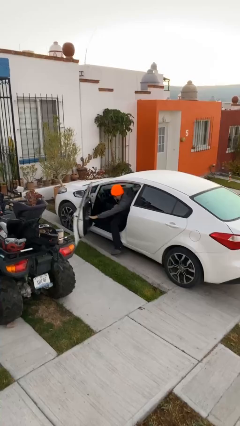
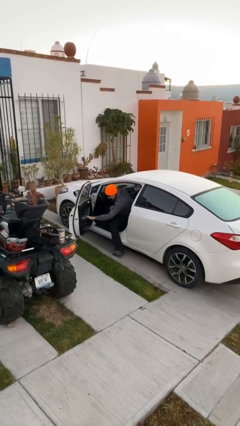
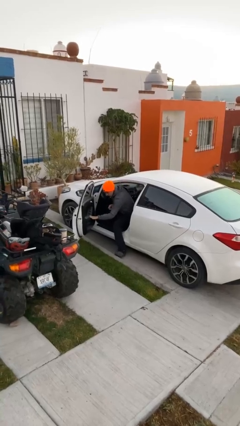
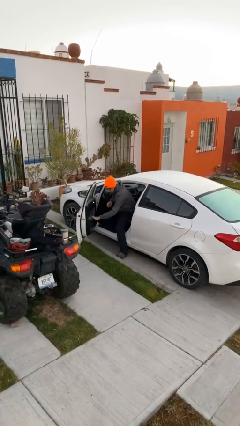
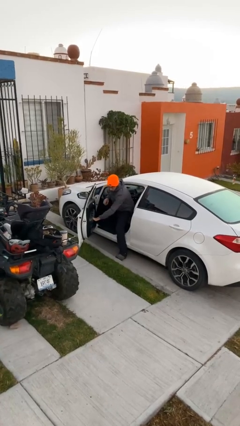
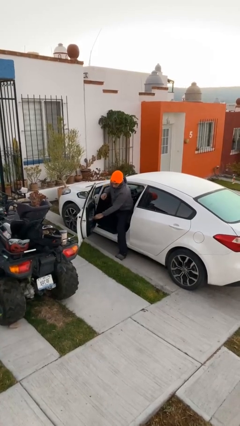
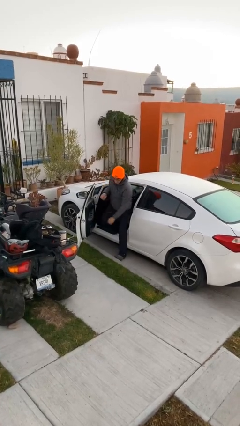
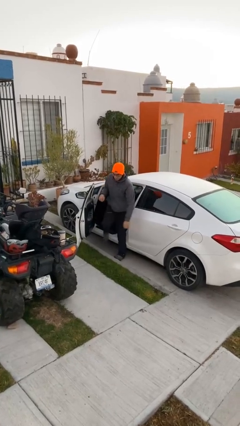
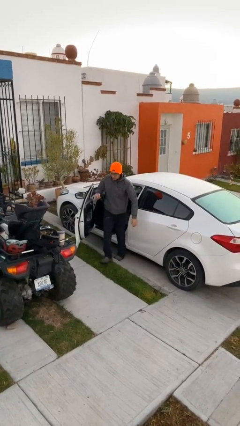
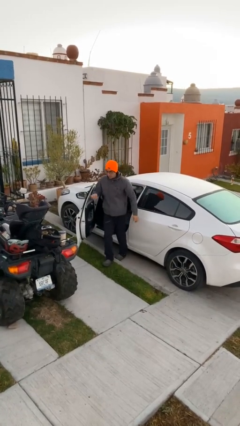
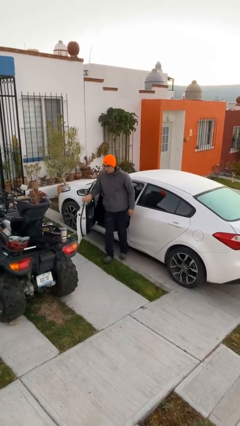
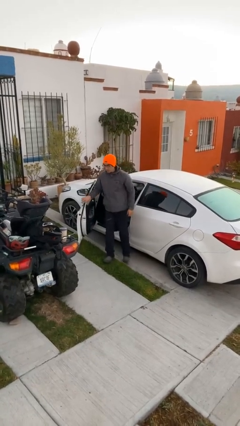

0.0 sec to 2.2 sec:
person exits car

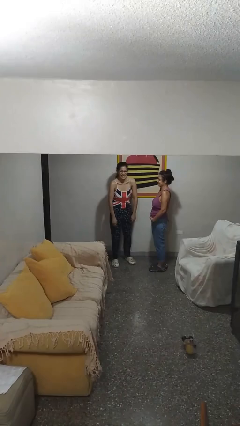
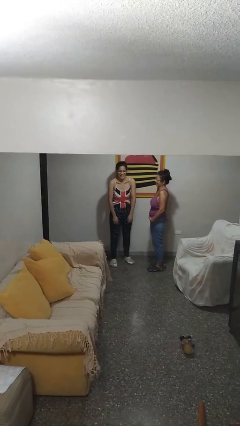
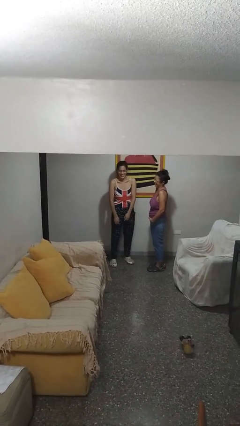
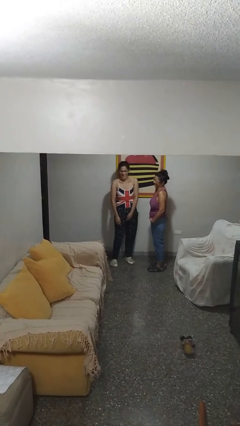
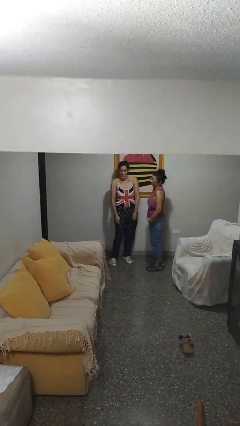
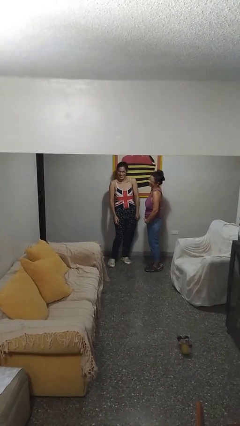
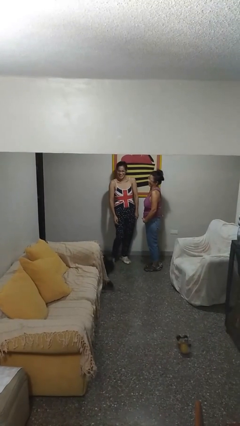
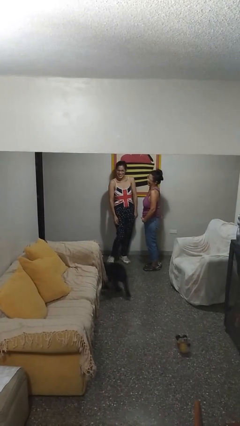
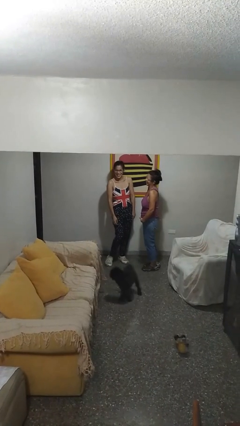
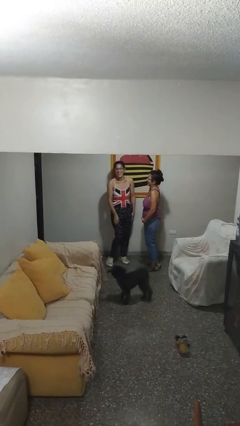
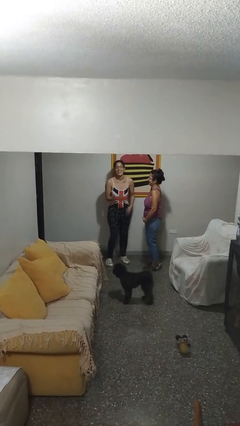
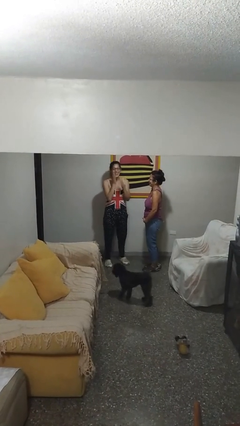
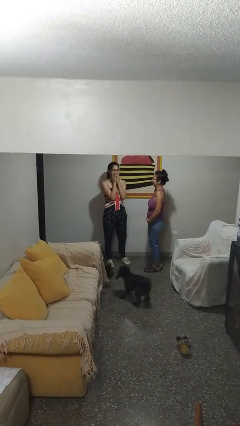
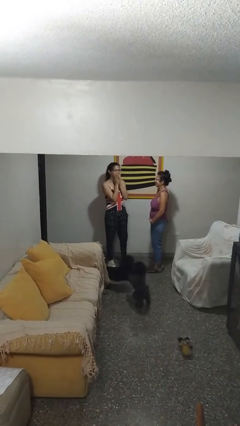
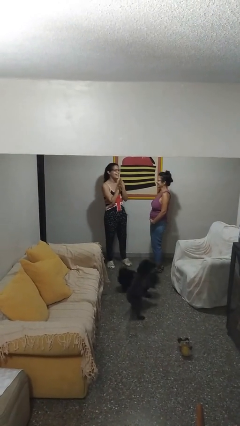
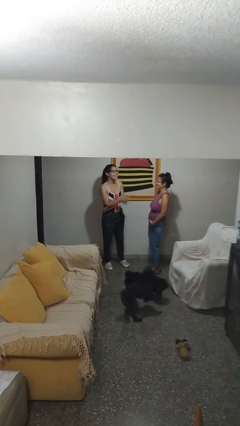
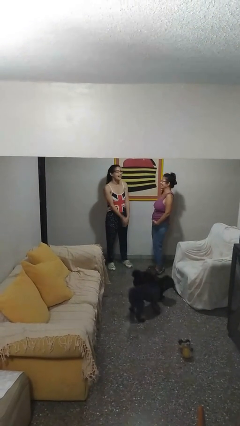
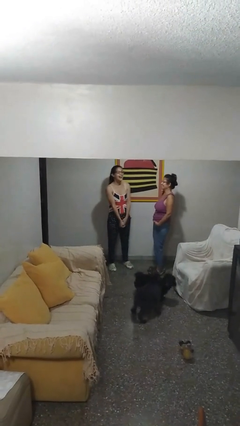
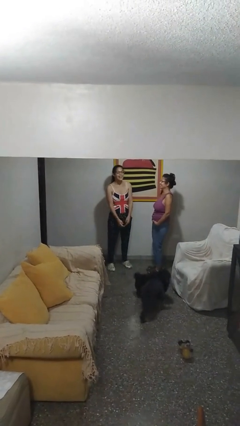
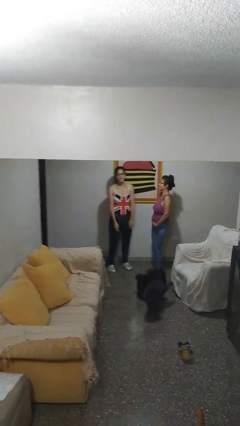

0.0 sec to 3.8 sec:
person laughs with person

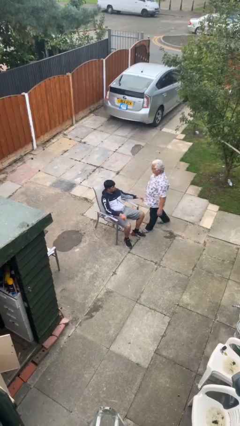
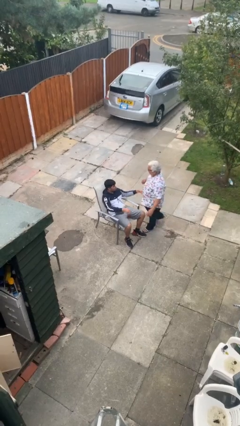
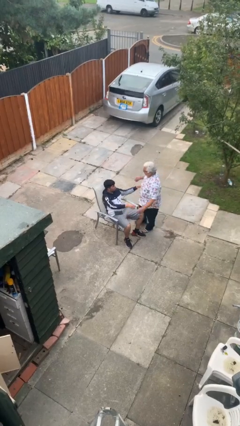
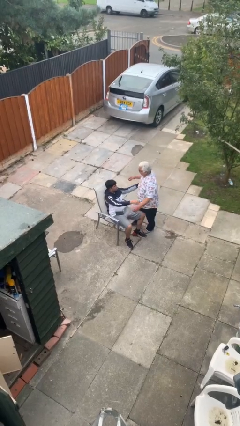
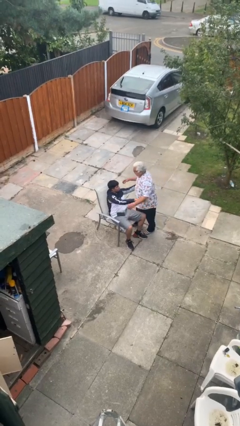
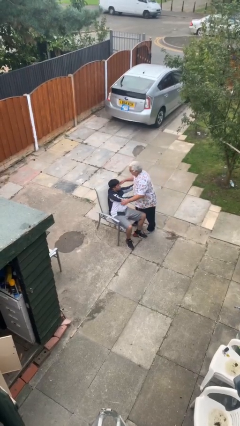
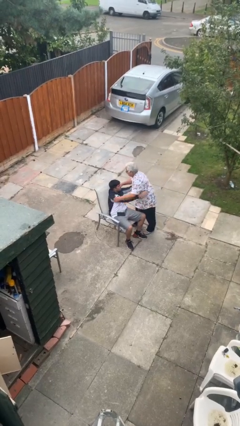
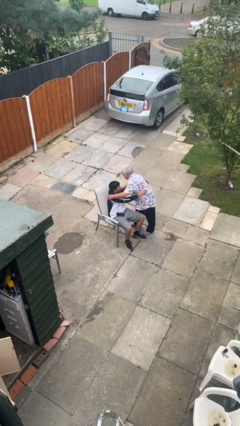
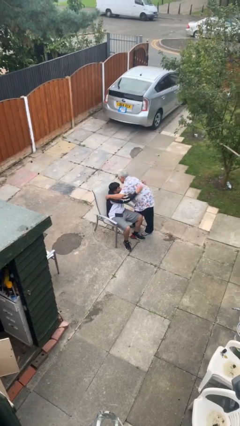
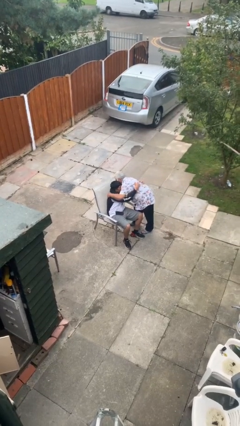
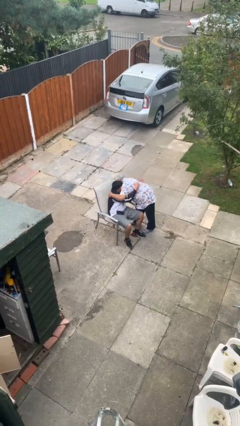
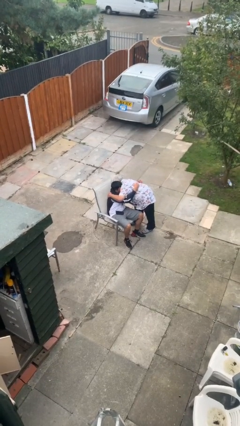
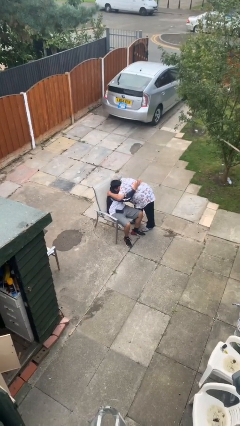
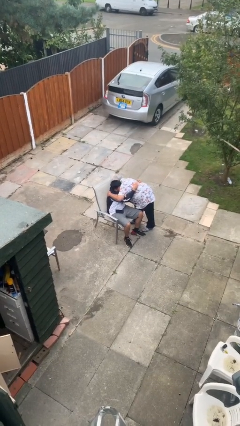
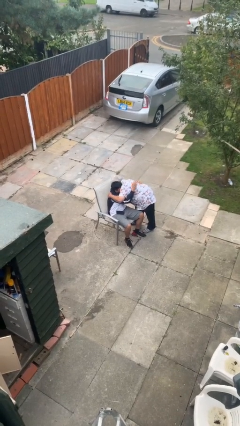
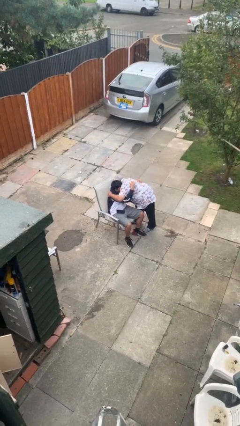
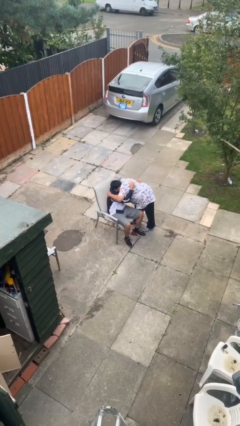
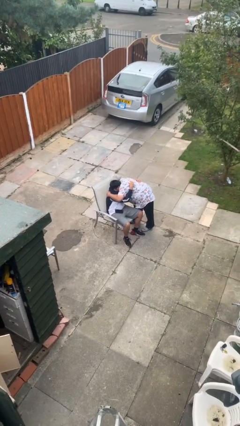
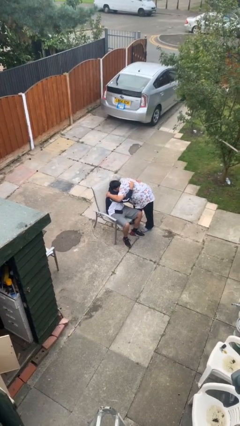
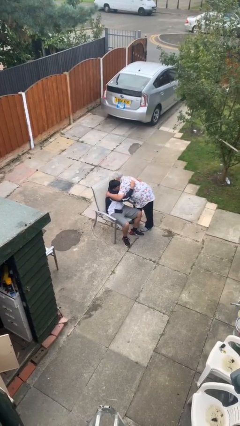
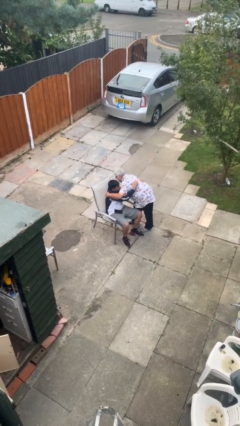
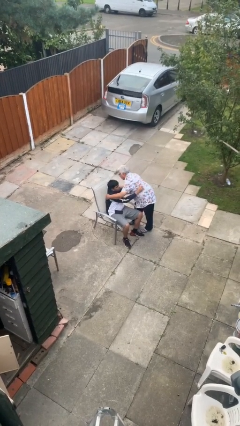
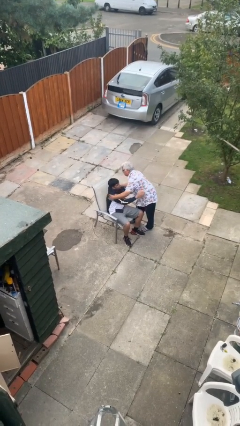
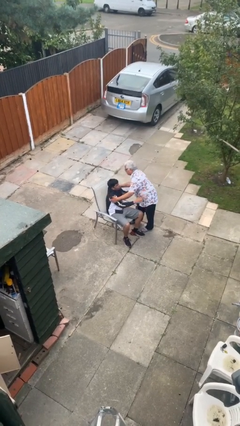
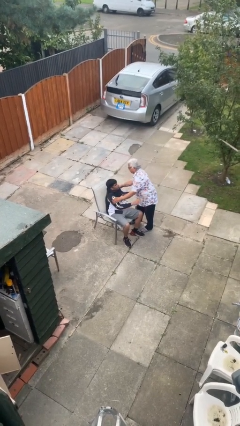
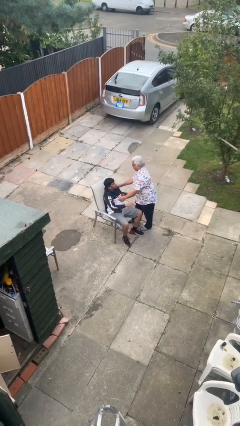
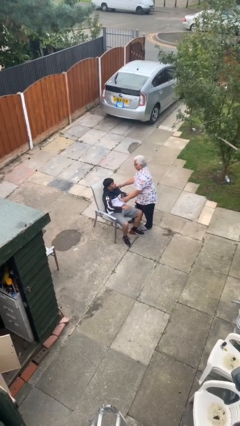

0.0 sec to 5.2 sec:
person embraces person

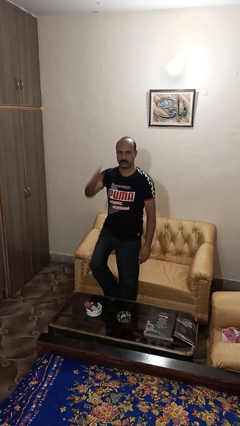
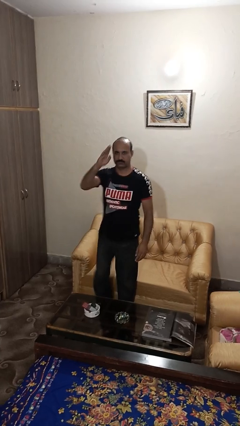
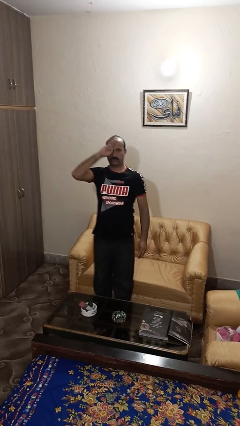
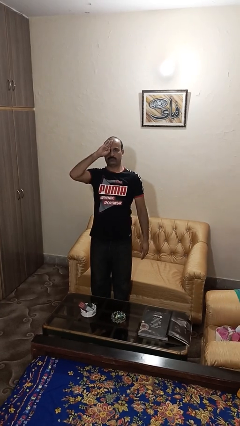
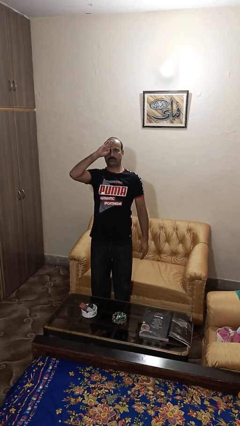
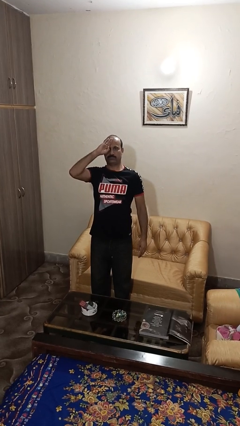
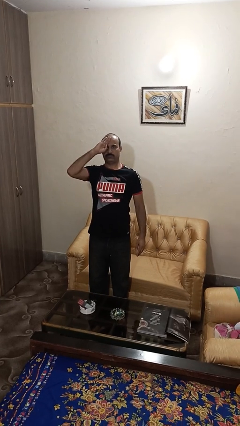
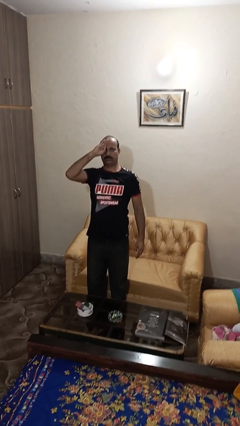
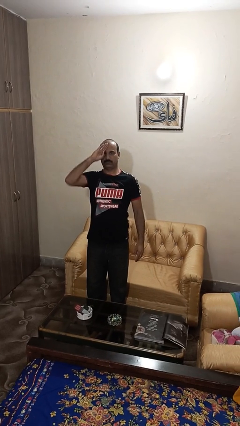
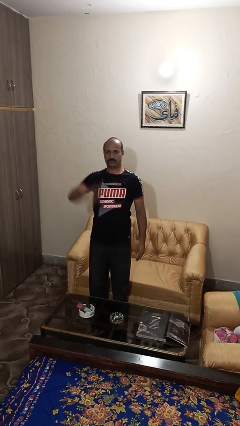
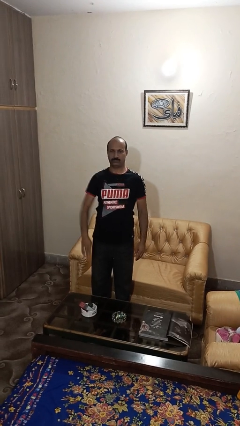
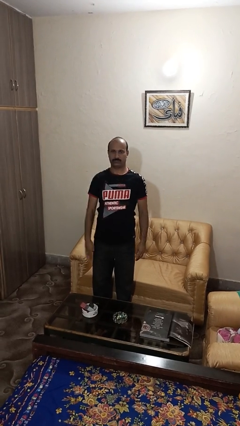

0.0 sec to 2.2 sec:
person salutes

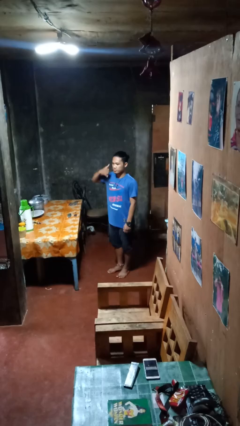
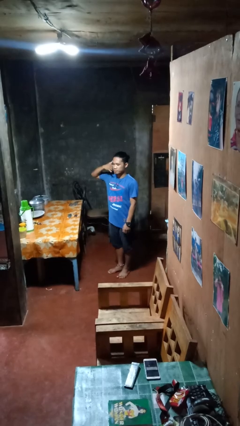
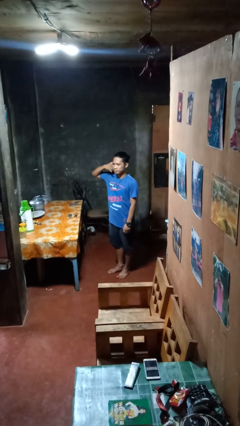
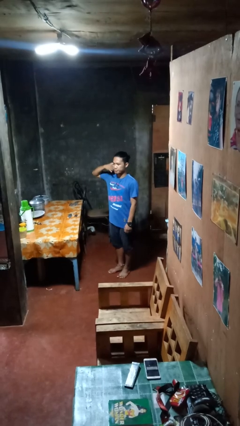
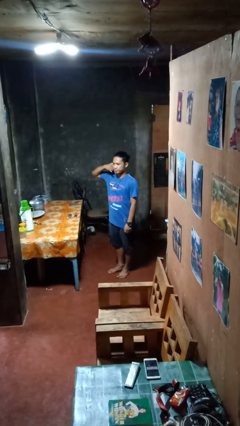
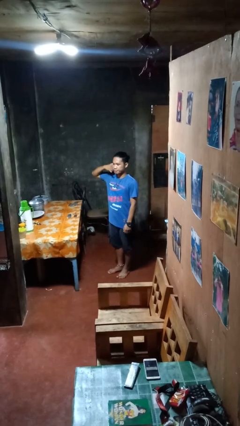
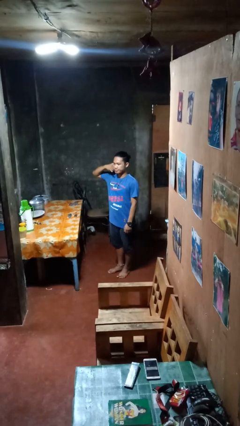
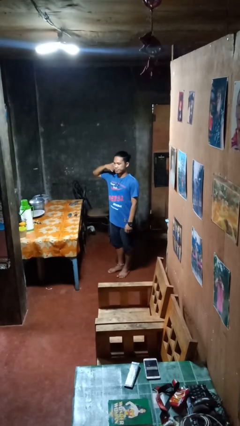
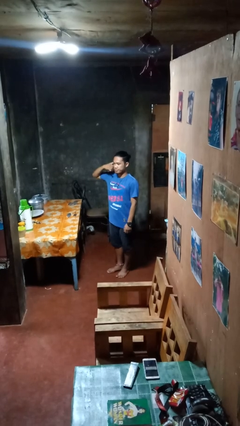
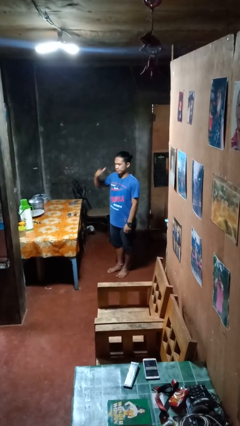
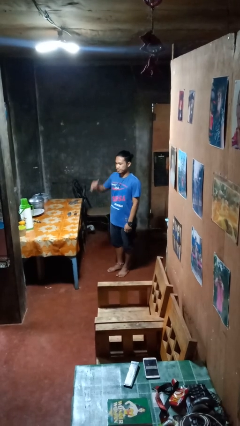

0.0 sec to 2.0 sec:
person gestures call me

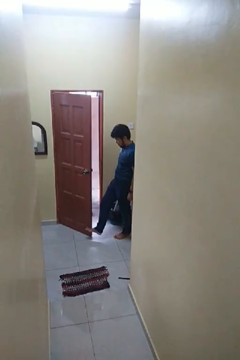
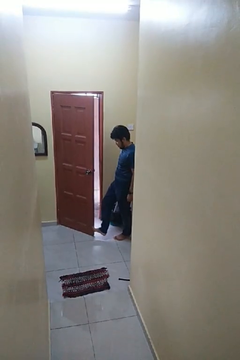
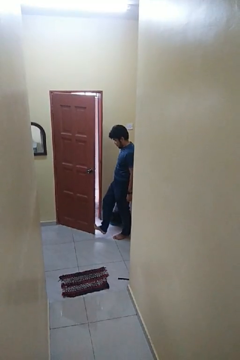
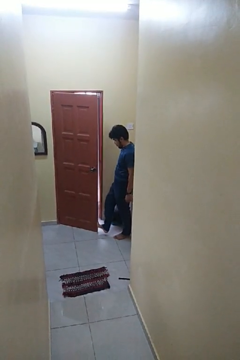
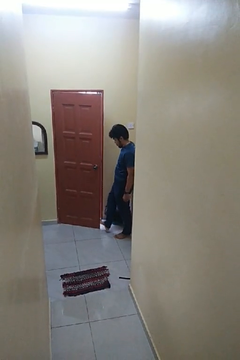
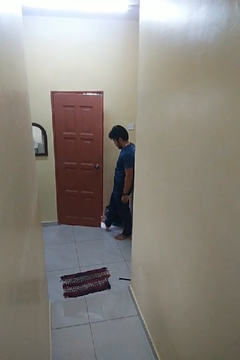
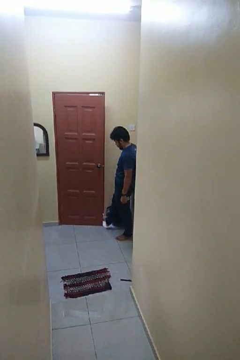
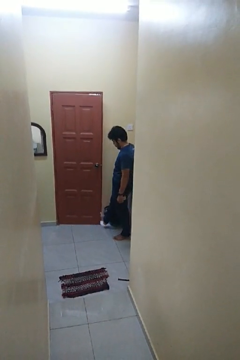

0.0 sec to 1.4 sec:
person closes door with foot

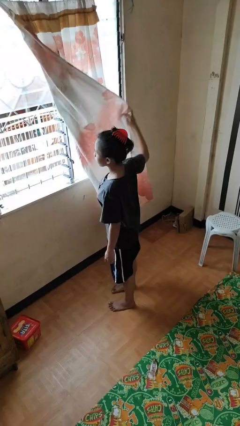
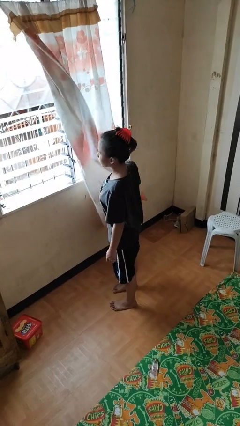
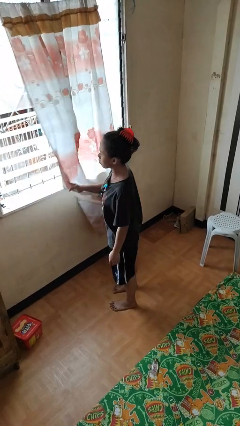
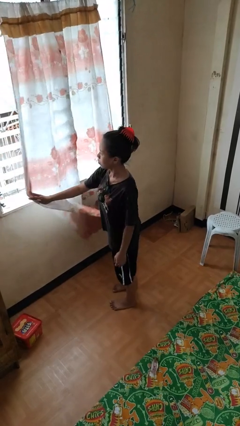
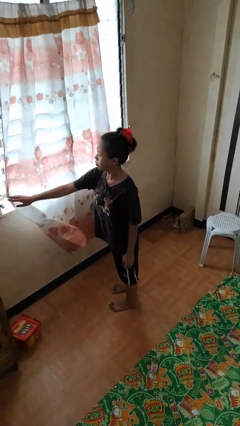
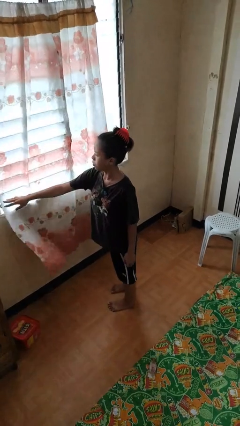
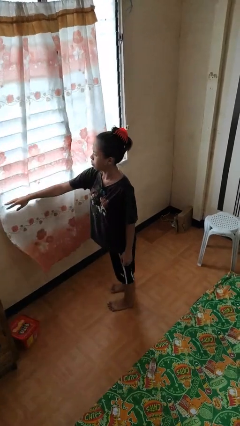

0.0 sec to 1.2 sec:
person closes curtains
